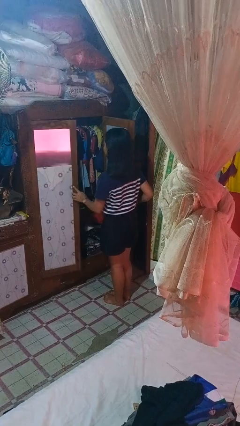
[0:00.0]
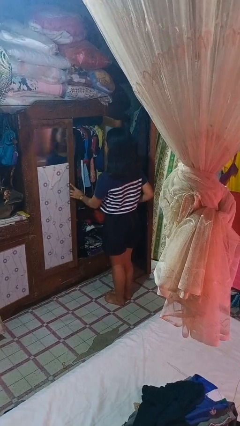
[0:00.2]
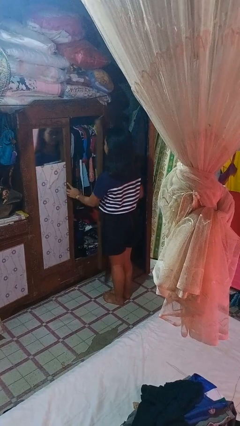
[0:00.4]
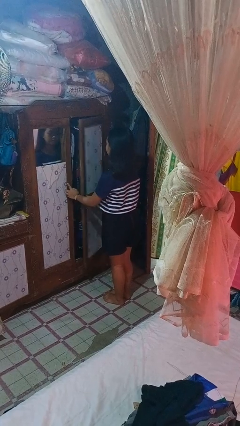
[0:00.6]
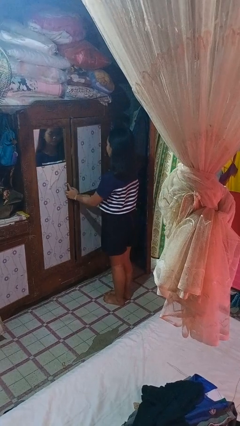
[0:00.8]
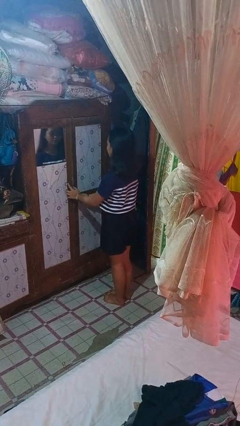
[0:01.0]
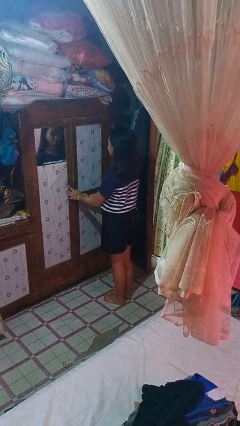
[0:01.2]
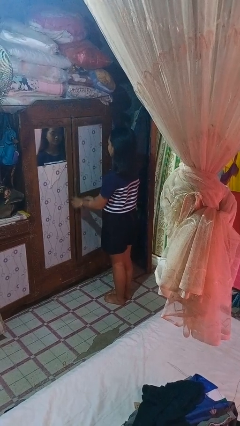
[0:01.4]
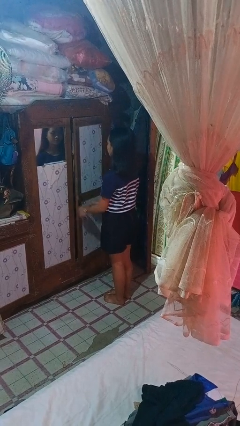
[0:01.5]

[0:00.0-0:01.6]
person closes closet door

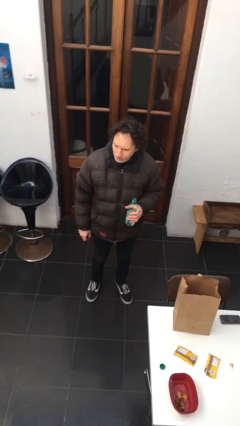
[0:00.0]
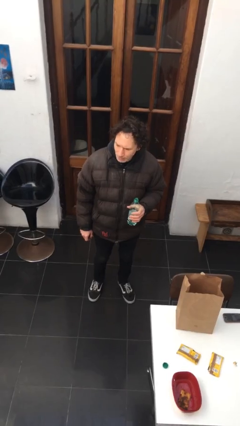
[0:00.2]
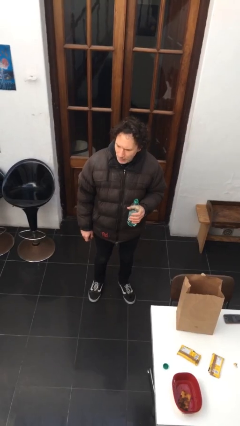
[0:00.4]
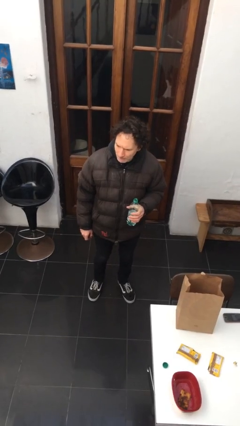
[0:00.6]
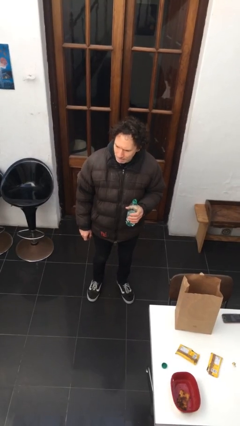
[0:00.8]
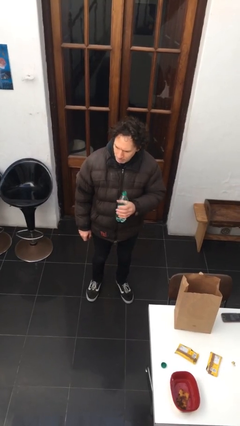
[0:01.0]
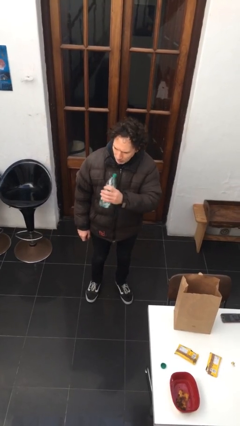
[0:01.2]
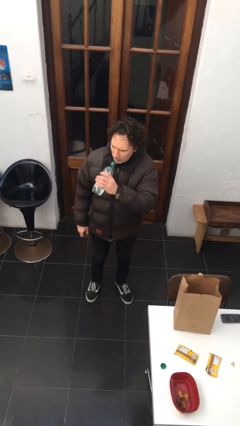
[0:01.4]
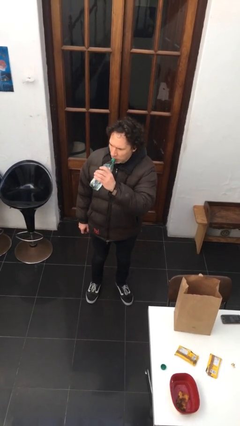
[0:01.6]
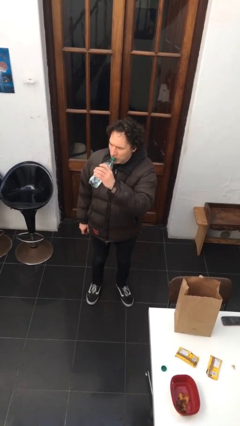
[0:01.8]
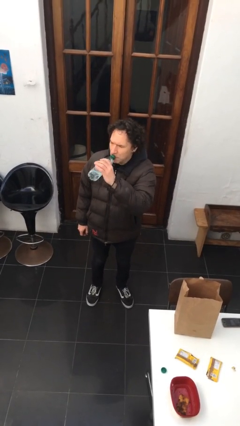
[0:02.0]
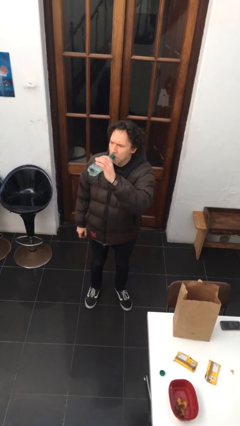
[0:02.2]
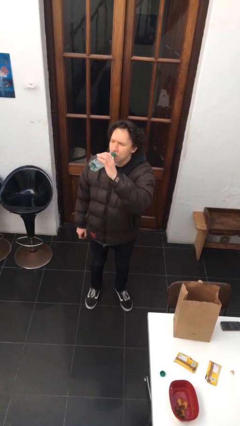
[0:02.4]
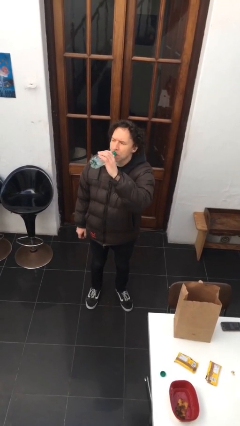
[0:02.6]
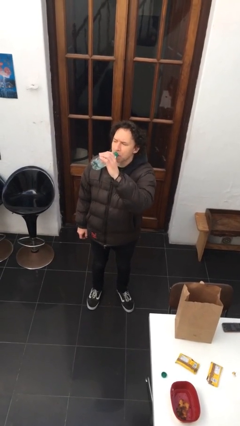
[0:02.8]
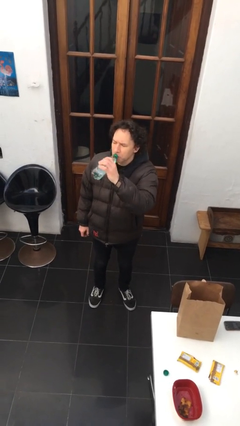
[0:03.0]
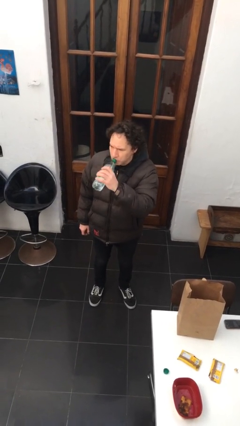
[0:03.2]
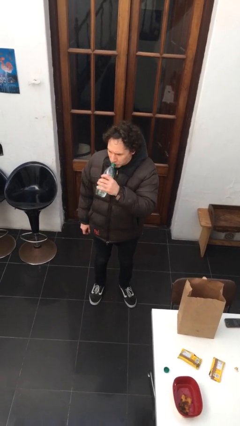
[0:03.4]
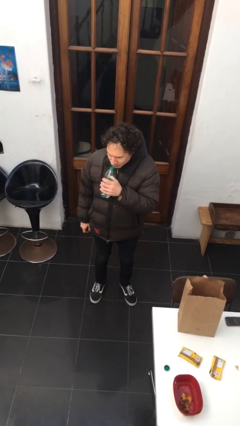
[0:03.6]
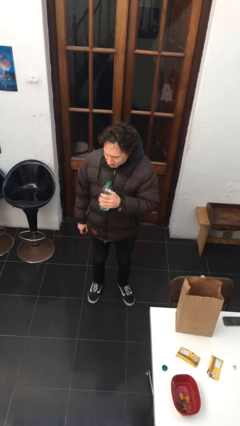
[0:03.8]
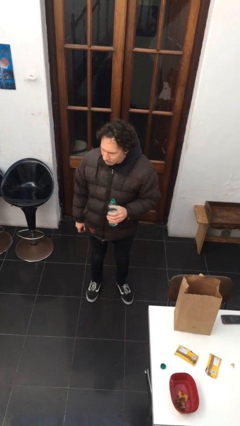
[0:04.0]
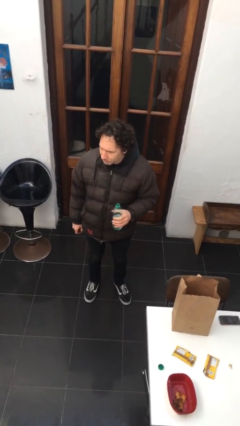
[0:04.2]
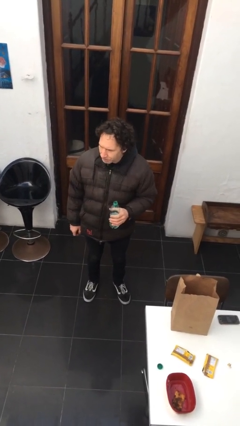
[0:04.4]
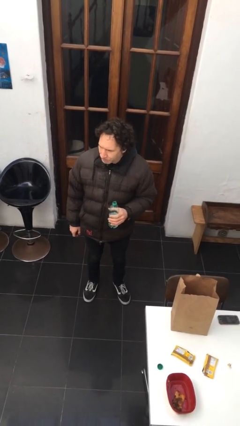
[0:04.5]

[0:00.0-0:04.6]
person drinks from bottle

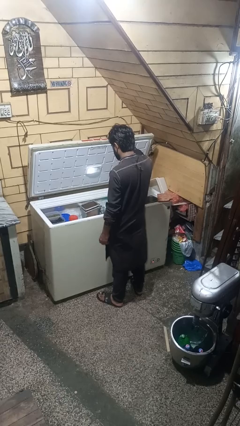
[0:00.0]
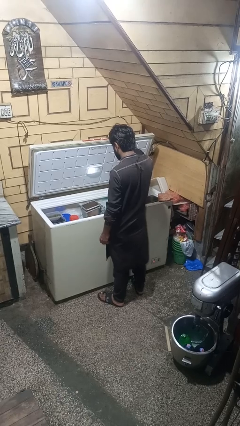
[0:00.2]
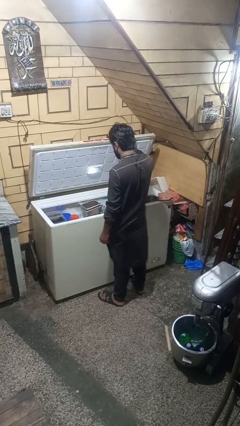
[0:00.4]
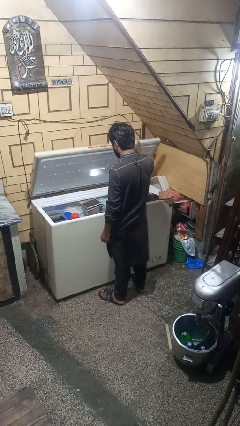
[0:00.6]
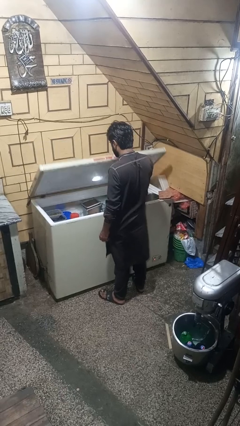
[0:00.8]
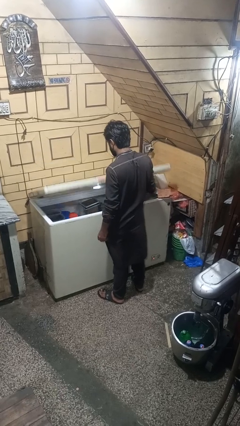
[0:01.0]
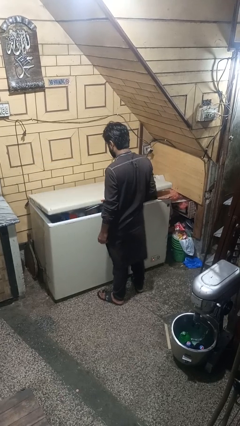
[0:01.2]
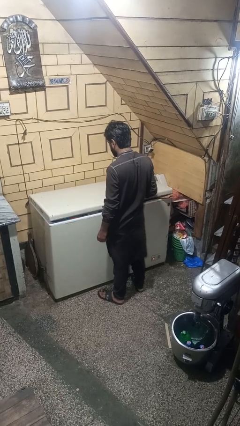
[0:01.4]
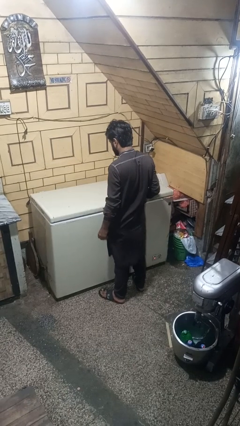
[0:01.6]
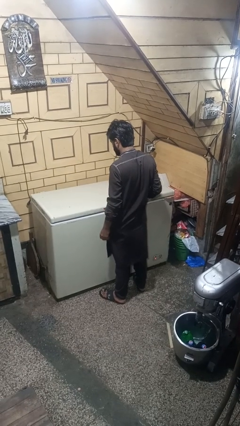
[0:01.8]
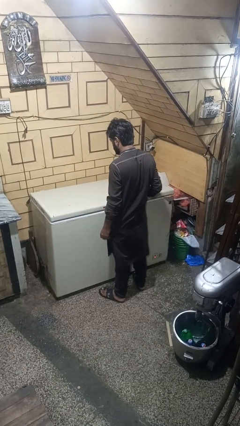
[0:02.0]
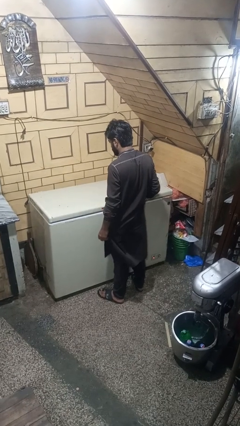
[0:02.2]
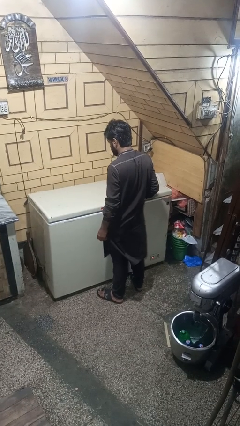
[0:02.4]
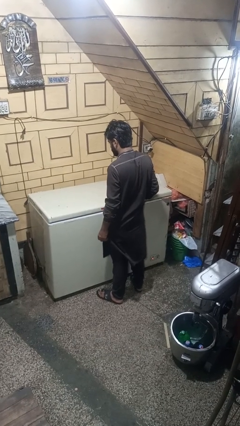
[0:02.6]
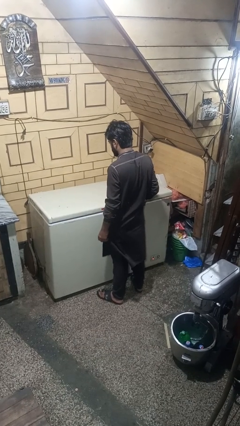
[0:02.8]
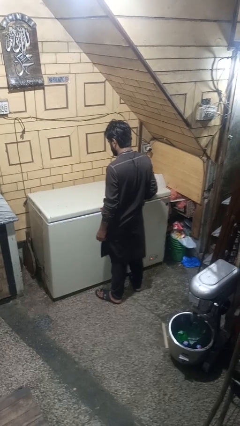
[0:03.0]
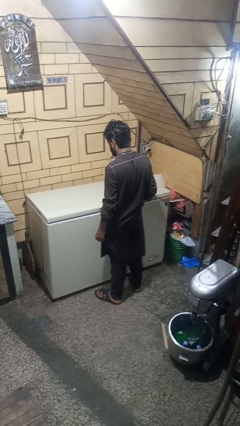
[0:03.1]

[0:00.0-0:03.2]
person closes refrigerator

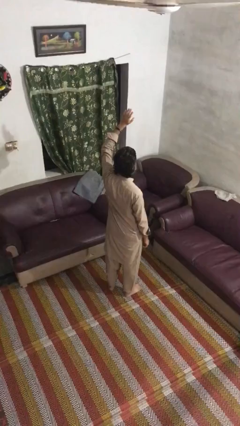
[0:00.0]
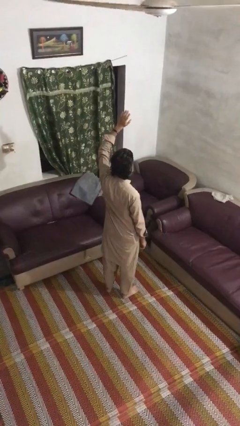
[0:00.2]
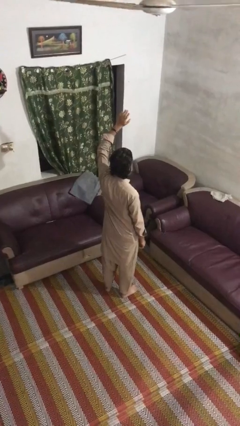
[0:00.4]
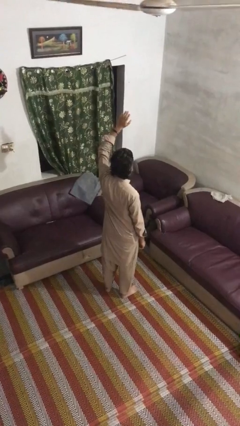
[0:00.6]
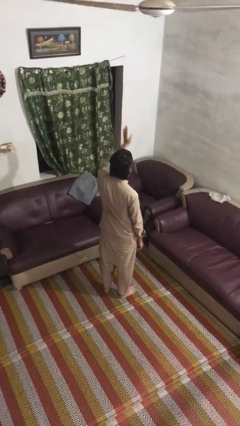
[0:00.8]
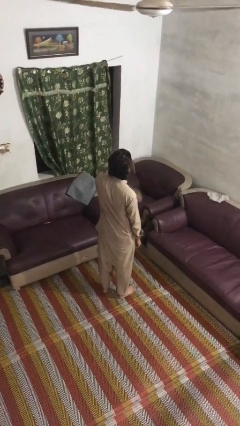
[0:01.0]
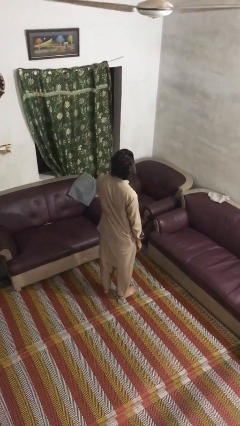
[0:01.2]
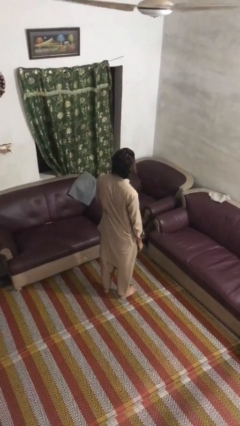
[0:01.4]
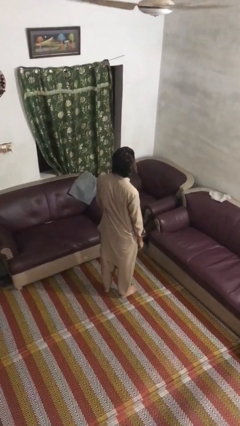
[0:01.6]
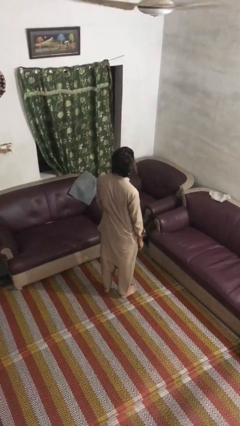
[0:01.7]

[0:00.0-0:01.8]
person gestures swipe down

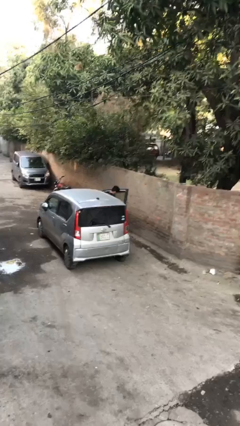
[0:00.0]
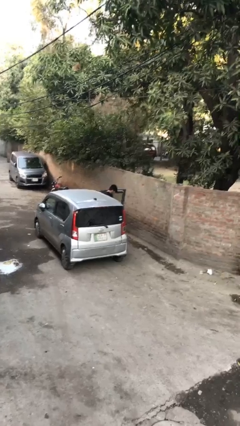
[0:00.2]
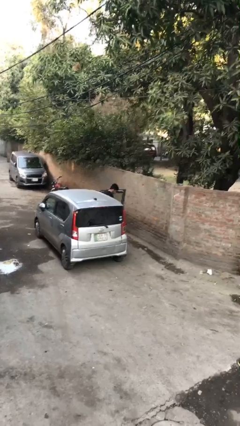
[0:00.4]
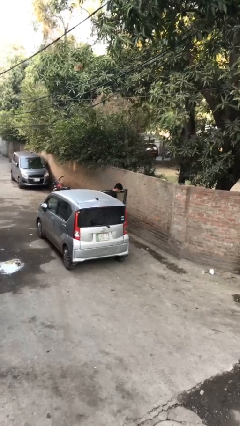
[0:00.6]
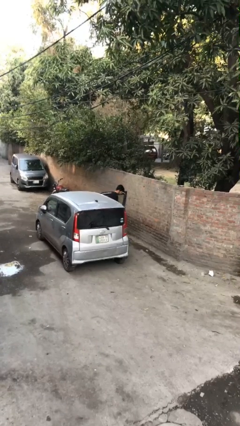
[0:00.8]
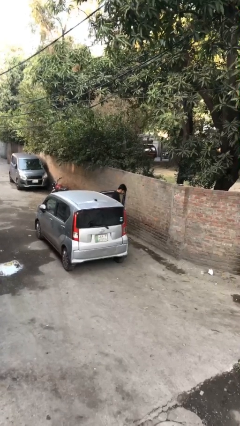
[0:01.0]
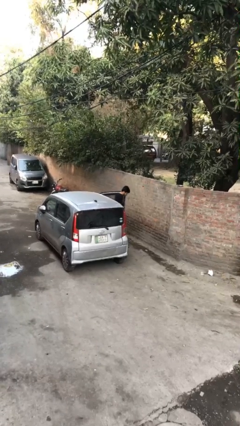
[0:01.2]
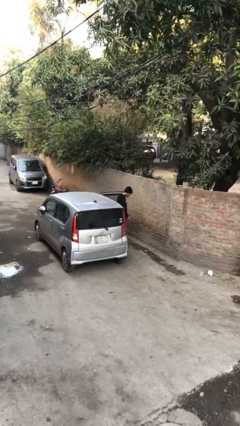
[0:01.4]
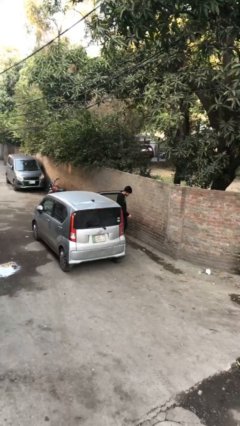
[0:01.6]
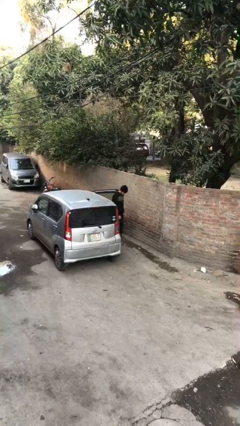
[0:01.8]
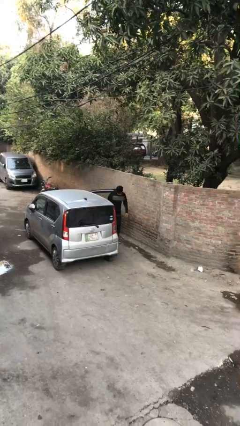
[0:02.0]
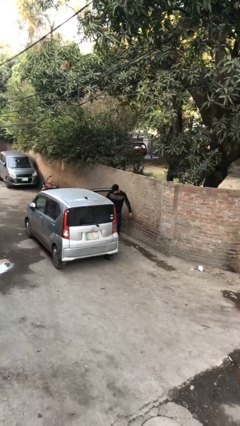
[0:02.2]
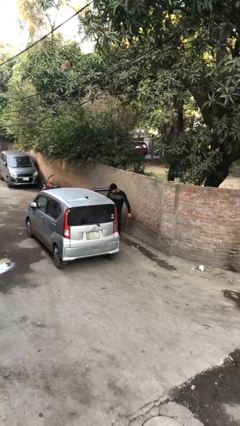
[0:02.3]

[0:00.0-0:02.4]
person exits car

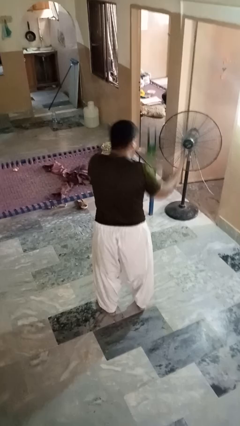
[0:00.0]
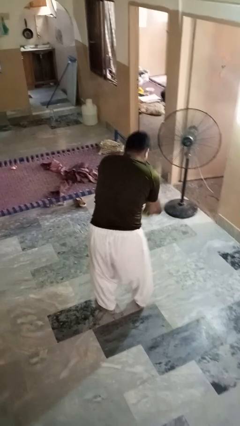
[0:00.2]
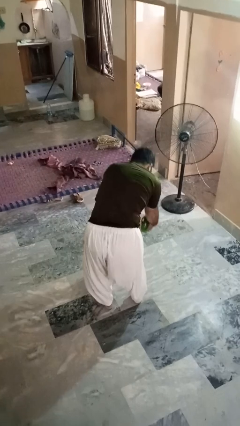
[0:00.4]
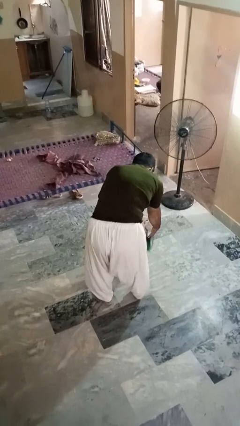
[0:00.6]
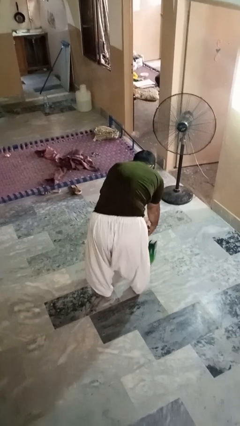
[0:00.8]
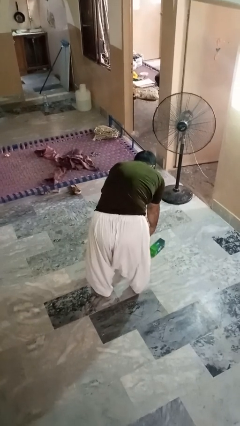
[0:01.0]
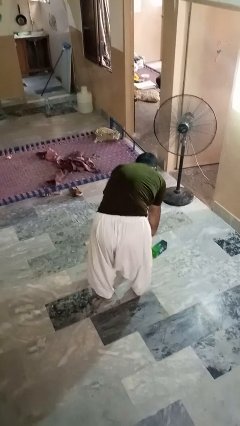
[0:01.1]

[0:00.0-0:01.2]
person catches dropped object

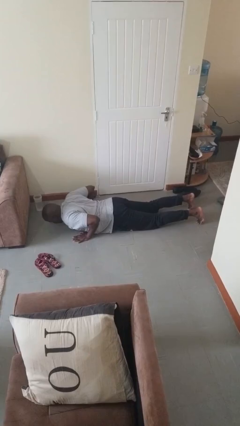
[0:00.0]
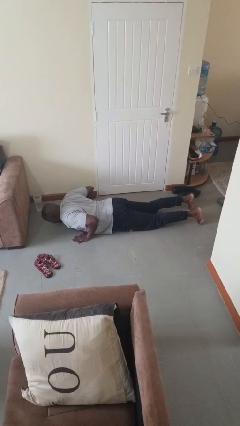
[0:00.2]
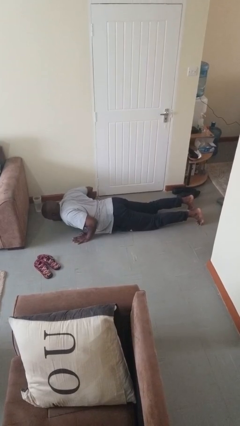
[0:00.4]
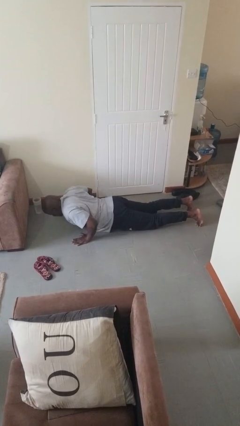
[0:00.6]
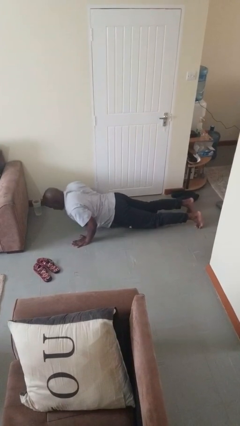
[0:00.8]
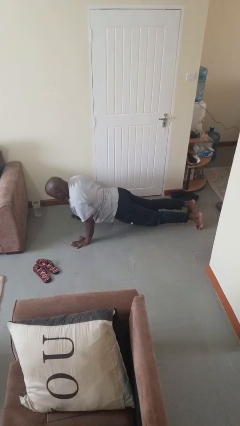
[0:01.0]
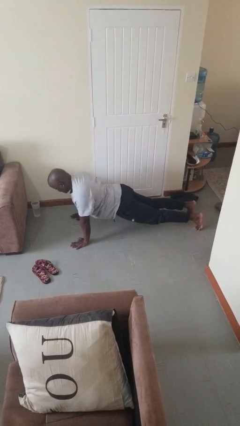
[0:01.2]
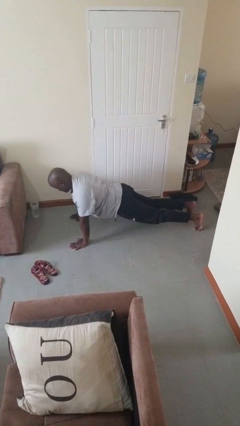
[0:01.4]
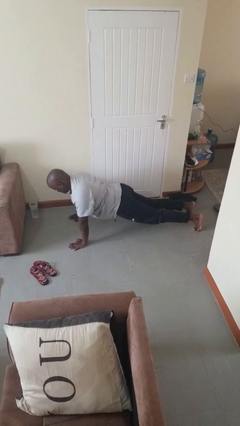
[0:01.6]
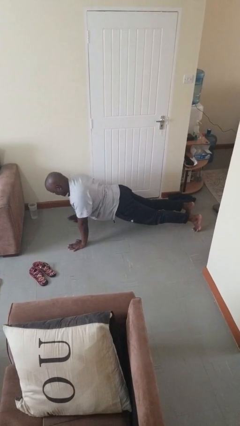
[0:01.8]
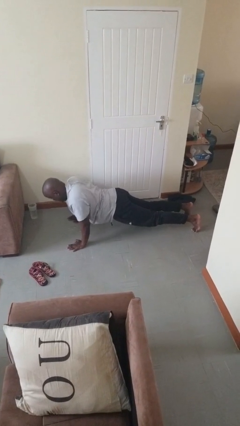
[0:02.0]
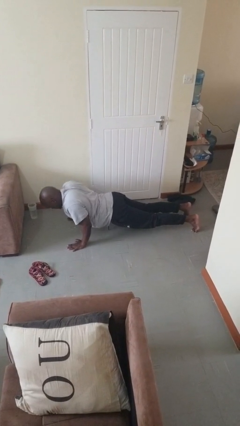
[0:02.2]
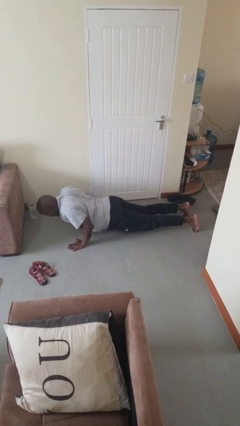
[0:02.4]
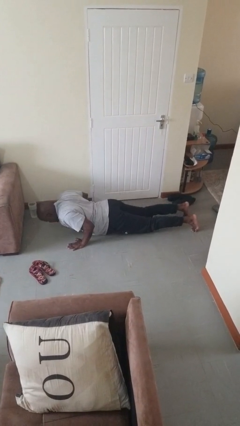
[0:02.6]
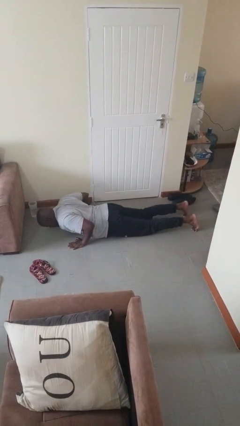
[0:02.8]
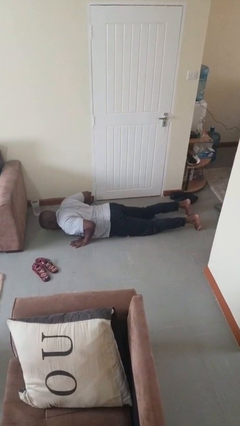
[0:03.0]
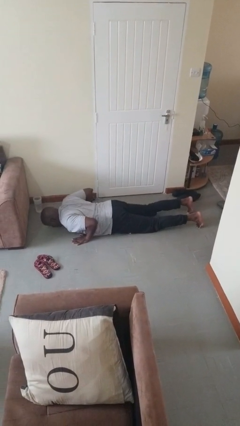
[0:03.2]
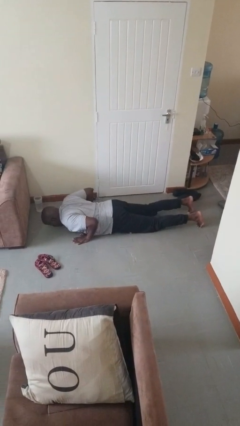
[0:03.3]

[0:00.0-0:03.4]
person exercises with pushup
